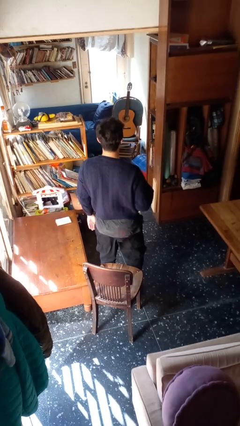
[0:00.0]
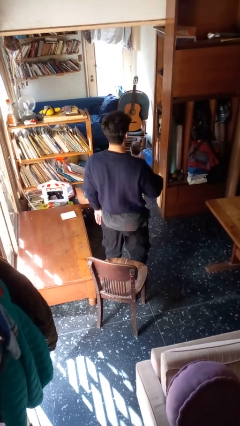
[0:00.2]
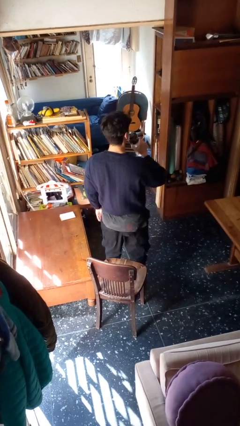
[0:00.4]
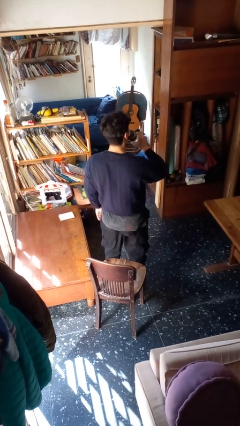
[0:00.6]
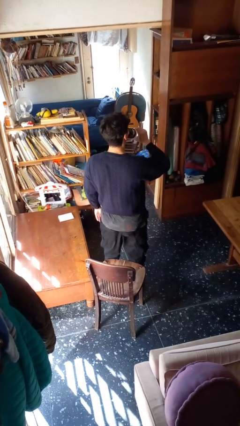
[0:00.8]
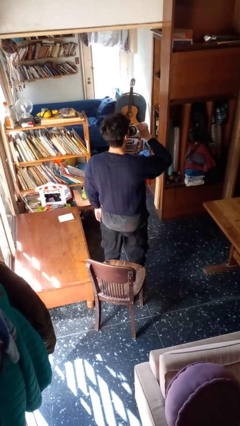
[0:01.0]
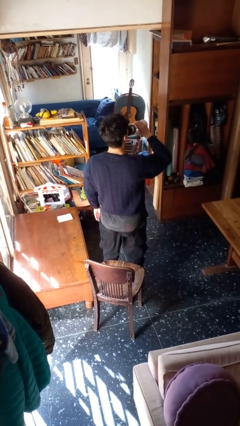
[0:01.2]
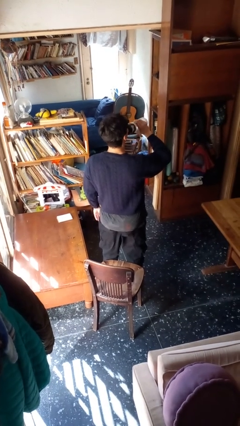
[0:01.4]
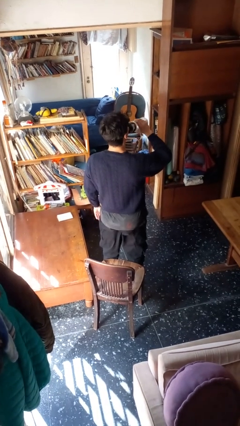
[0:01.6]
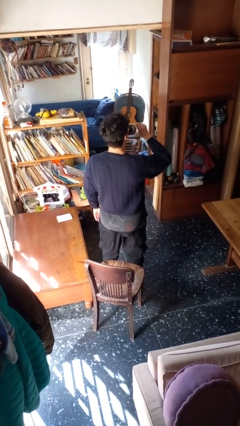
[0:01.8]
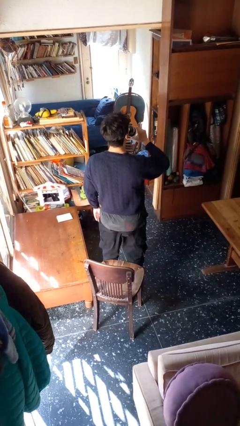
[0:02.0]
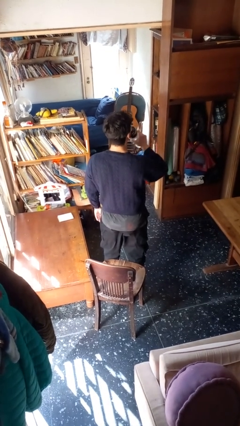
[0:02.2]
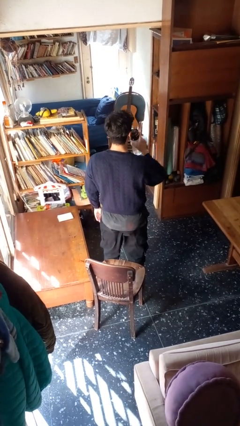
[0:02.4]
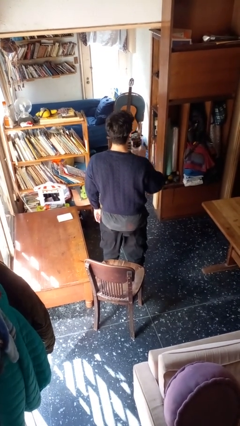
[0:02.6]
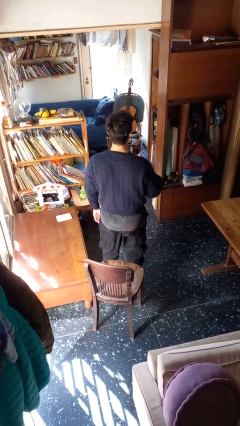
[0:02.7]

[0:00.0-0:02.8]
person drinks from bottle

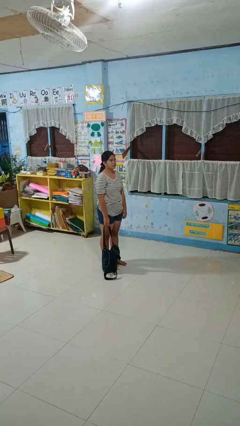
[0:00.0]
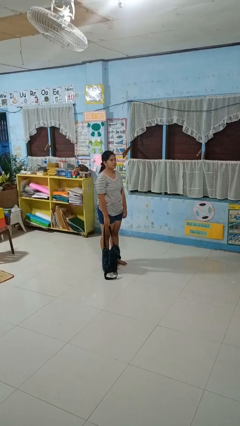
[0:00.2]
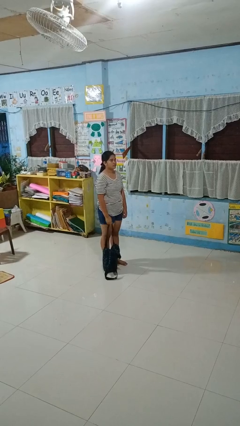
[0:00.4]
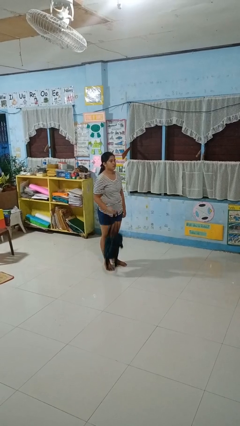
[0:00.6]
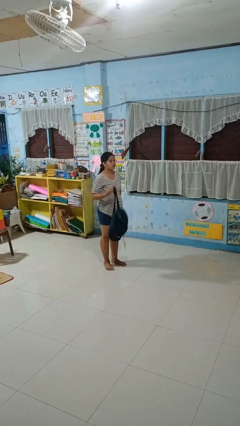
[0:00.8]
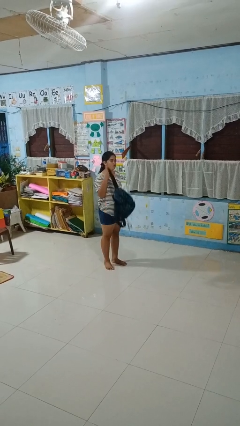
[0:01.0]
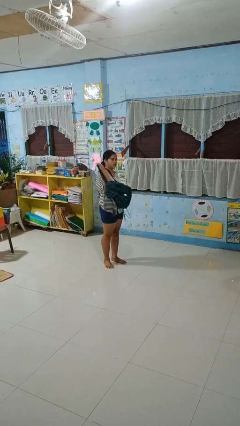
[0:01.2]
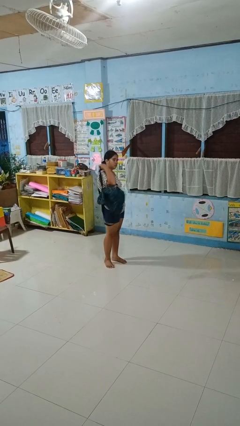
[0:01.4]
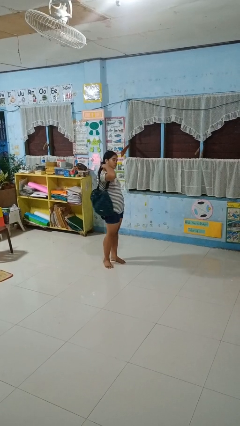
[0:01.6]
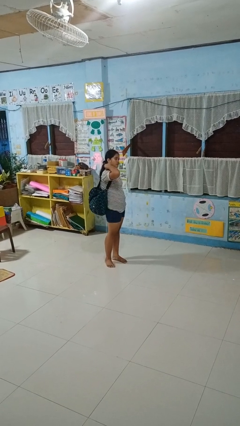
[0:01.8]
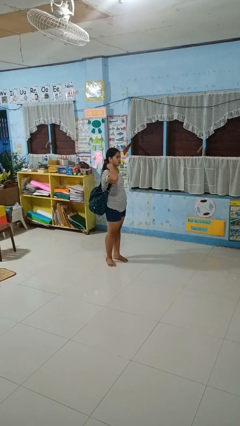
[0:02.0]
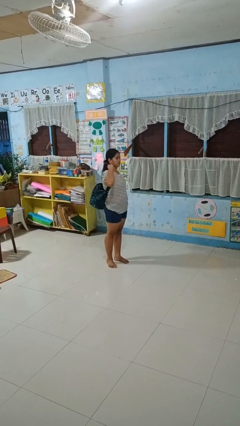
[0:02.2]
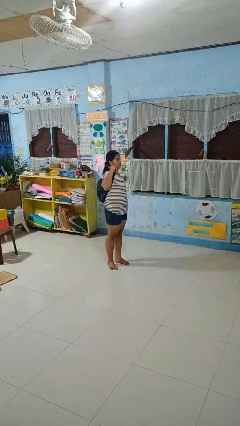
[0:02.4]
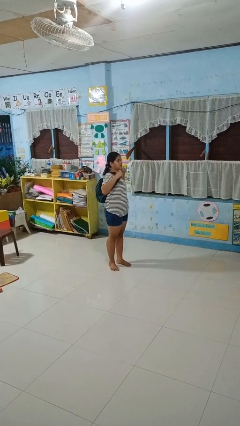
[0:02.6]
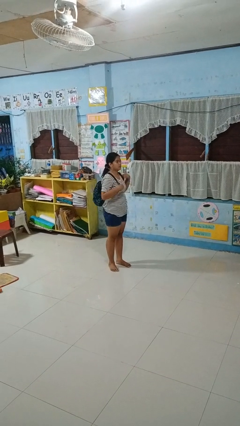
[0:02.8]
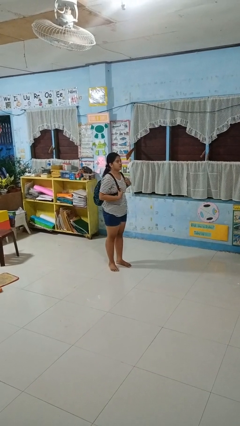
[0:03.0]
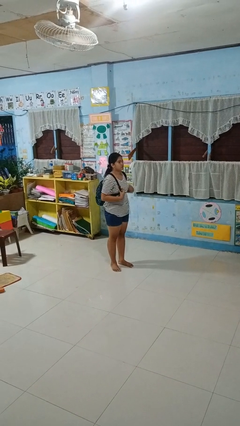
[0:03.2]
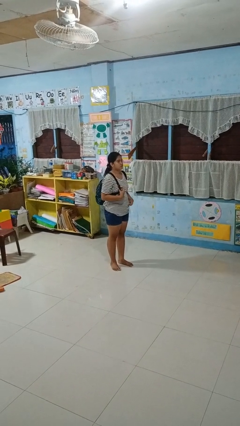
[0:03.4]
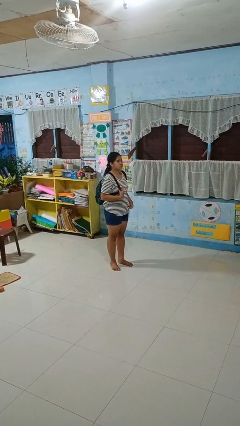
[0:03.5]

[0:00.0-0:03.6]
person puts on backpack

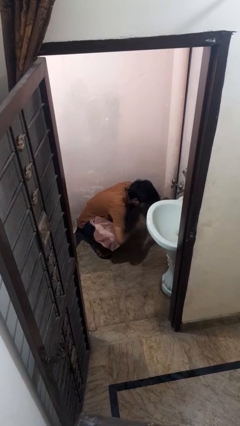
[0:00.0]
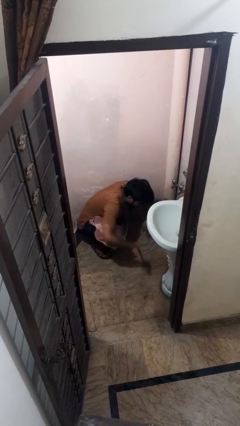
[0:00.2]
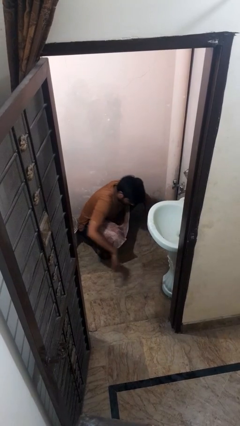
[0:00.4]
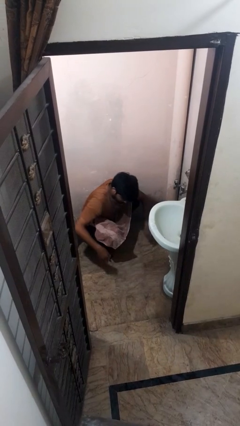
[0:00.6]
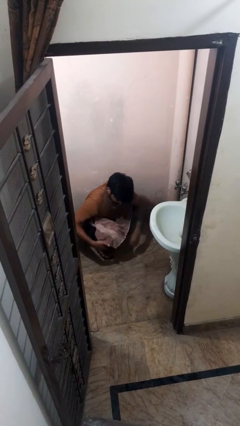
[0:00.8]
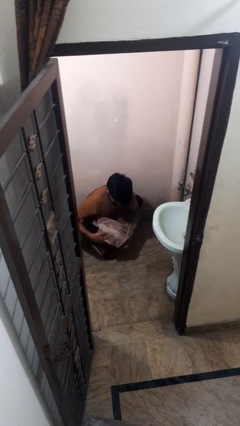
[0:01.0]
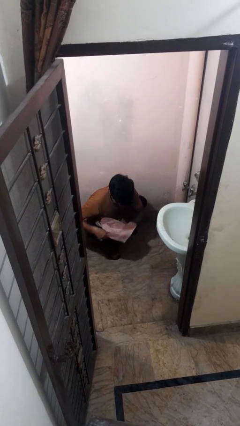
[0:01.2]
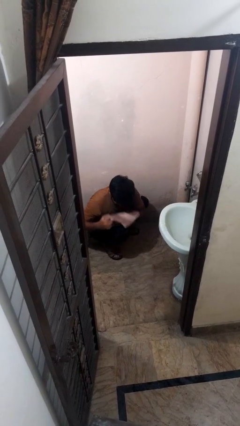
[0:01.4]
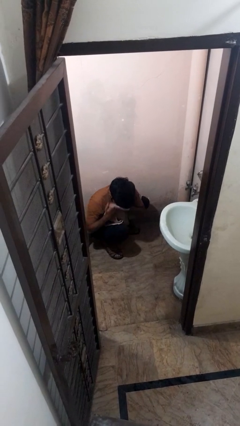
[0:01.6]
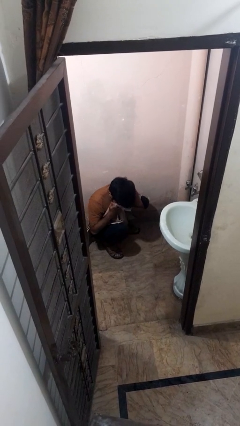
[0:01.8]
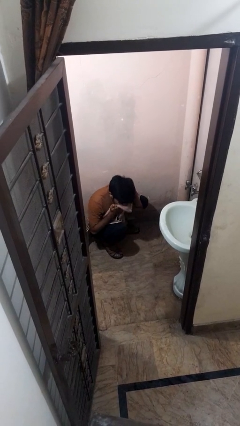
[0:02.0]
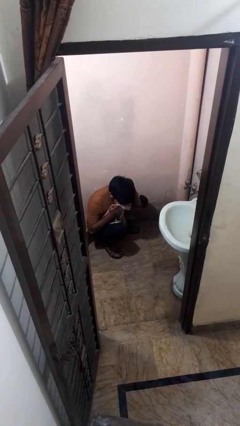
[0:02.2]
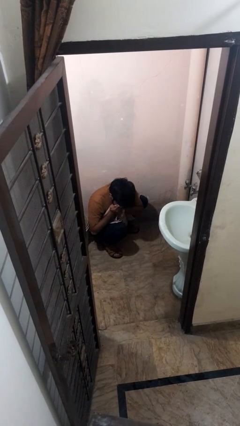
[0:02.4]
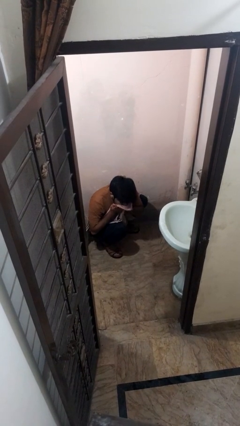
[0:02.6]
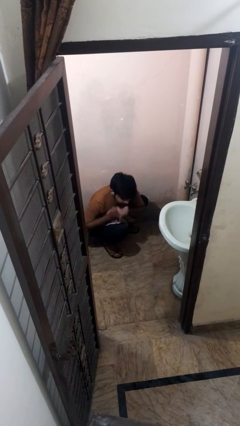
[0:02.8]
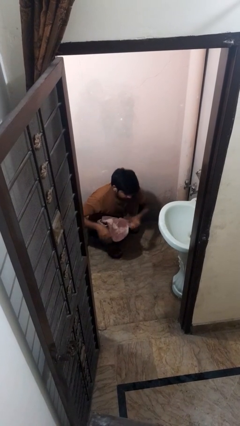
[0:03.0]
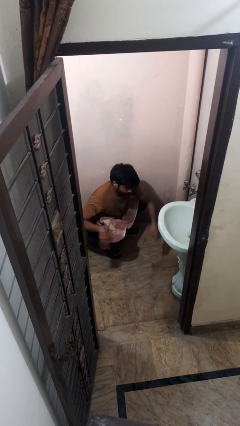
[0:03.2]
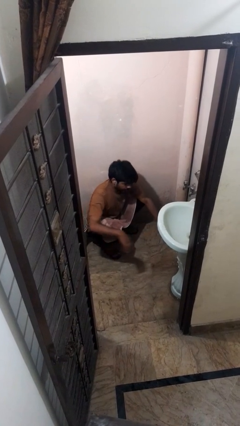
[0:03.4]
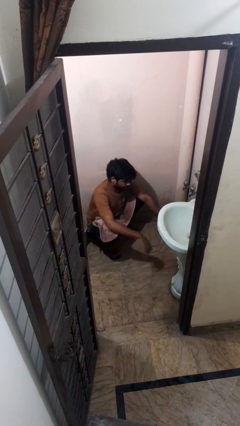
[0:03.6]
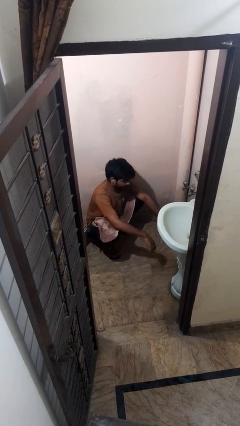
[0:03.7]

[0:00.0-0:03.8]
person picks up object from bed

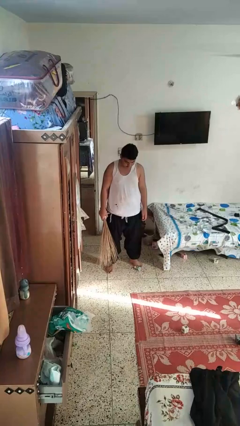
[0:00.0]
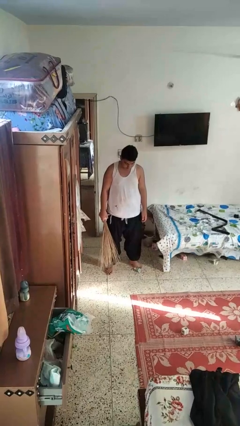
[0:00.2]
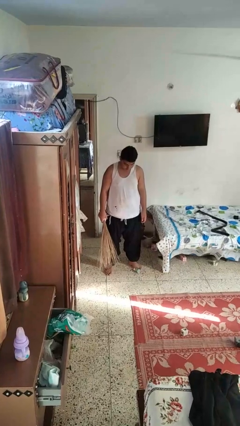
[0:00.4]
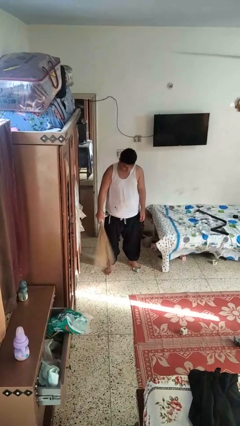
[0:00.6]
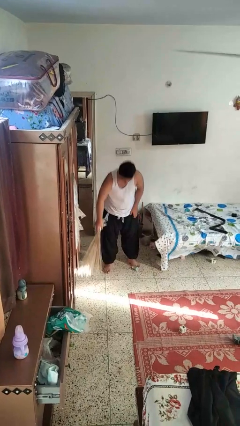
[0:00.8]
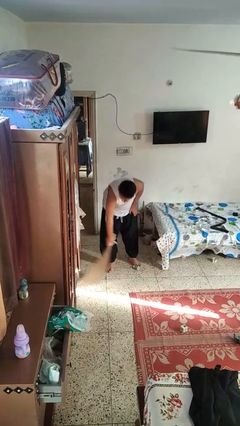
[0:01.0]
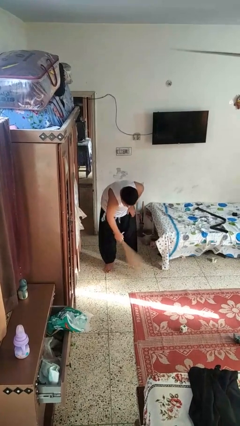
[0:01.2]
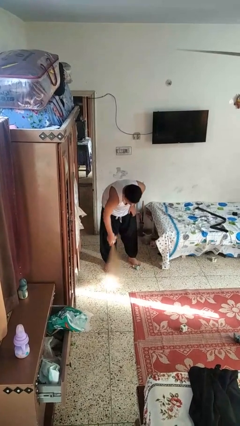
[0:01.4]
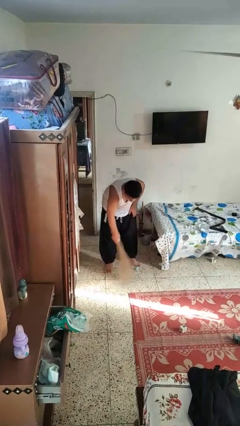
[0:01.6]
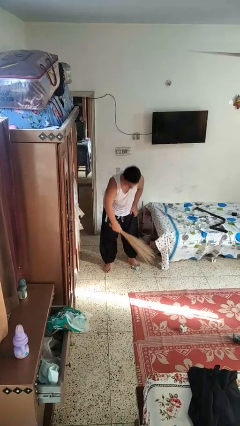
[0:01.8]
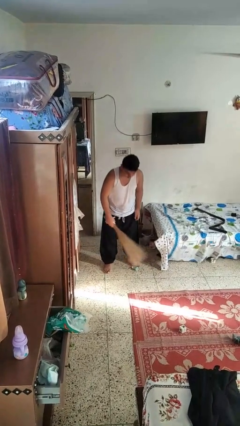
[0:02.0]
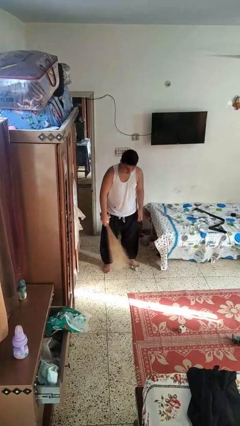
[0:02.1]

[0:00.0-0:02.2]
person sweeps floor

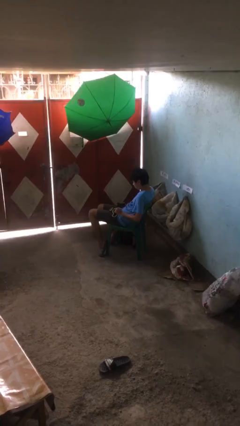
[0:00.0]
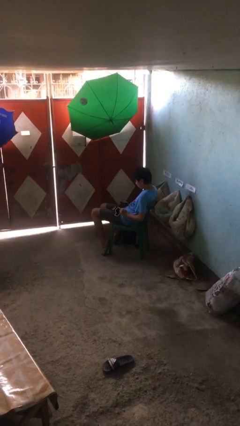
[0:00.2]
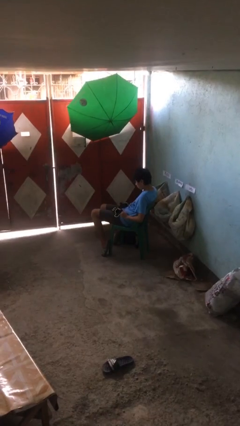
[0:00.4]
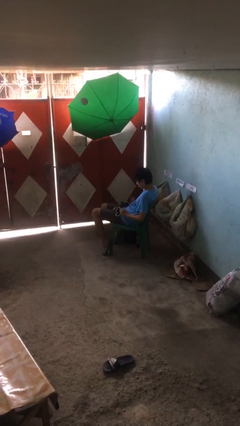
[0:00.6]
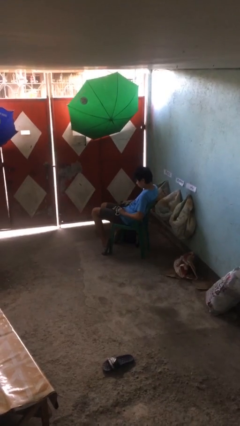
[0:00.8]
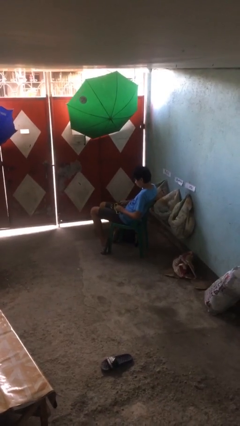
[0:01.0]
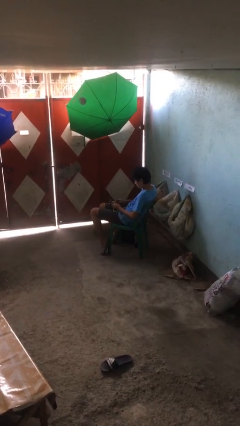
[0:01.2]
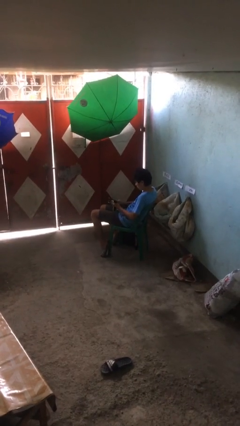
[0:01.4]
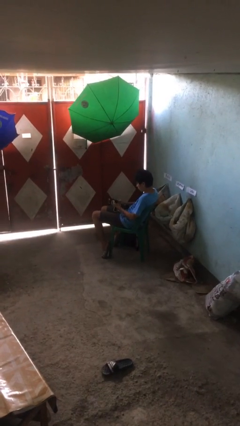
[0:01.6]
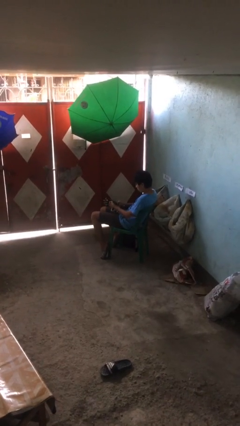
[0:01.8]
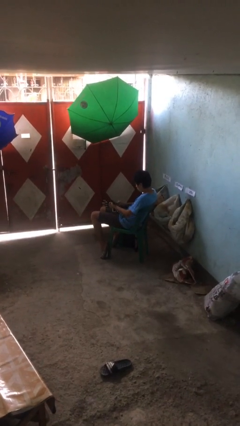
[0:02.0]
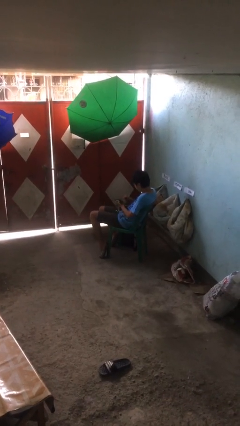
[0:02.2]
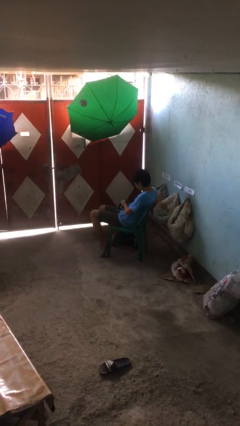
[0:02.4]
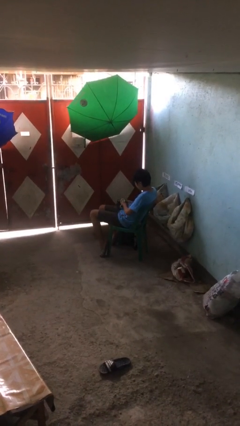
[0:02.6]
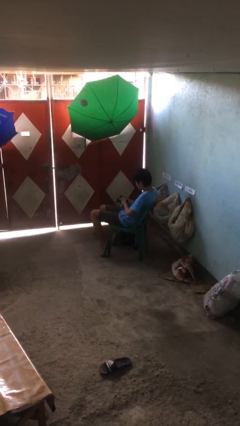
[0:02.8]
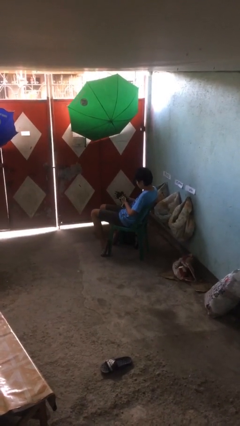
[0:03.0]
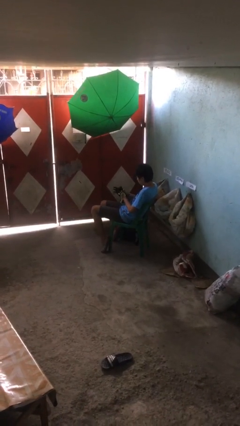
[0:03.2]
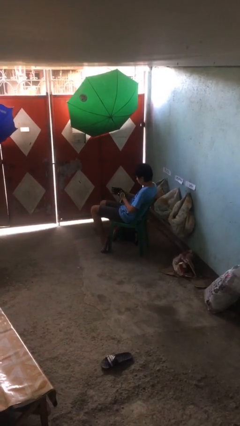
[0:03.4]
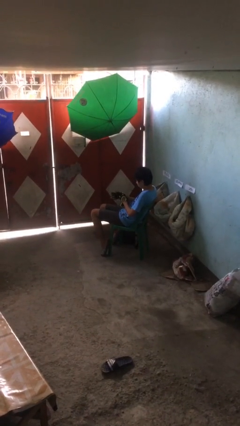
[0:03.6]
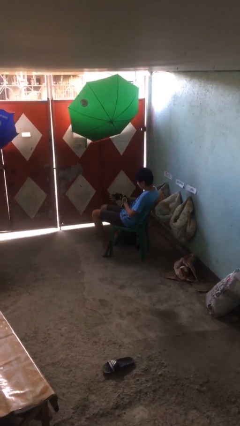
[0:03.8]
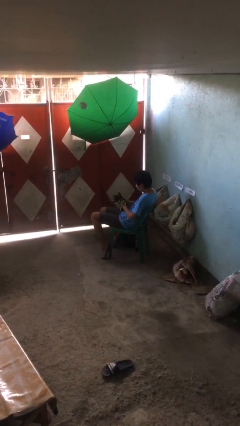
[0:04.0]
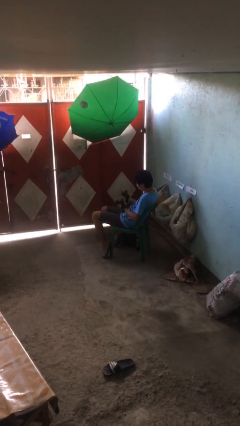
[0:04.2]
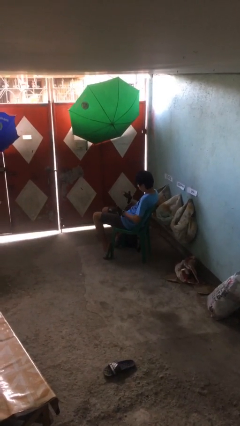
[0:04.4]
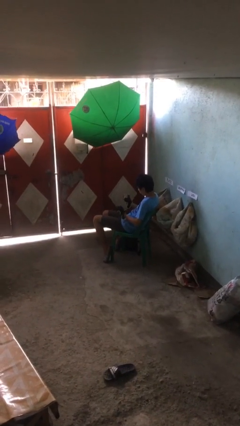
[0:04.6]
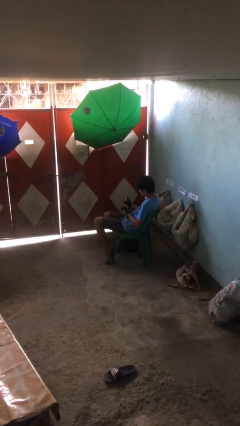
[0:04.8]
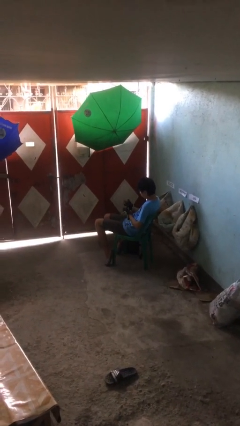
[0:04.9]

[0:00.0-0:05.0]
person puts on gloves

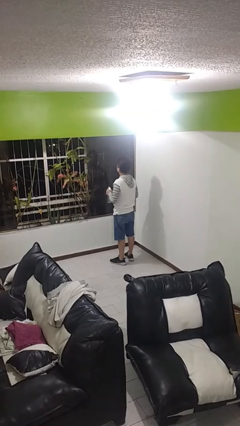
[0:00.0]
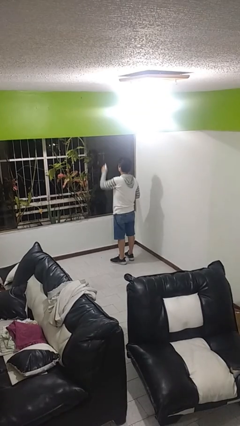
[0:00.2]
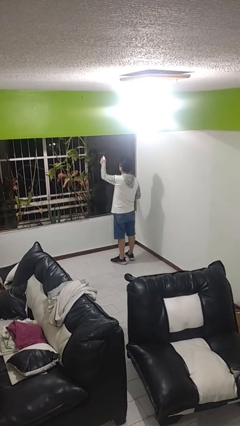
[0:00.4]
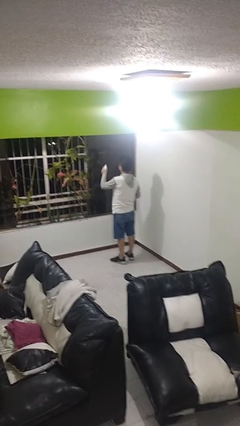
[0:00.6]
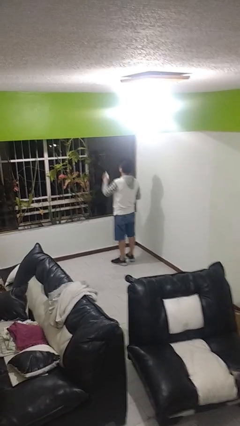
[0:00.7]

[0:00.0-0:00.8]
person sprays from bottle
